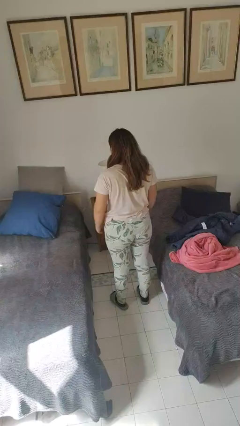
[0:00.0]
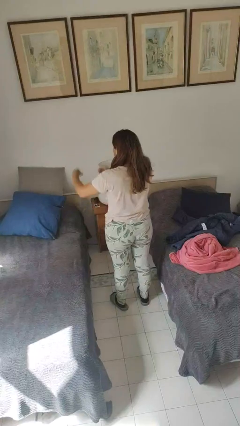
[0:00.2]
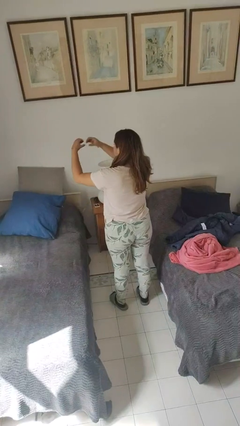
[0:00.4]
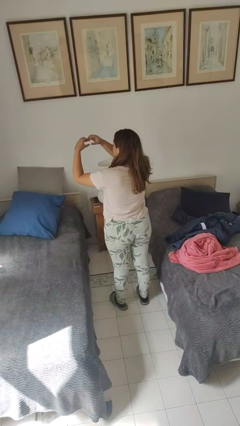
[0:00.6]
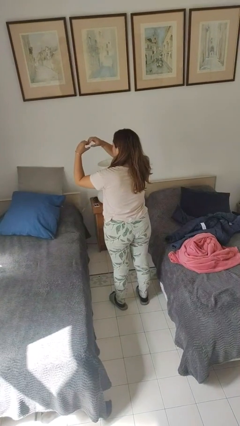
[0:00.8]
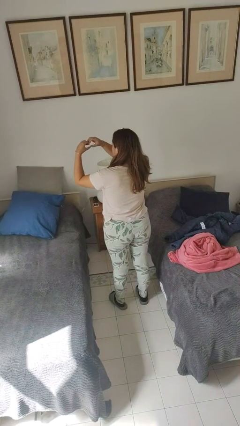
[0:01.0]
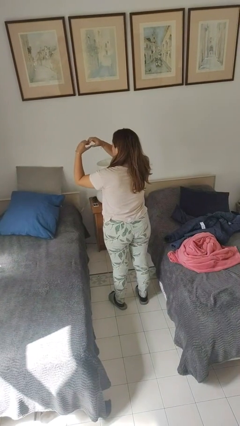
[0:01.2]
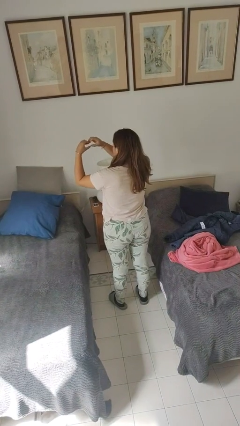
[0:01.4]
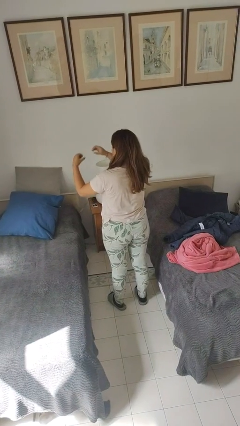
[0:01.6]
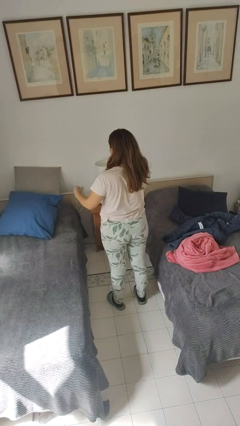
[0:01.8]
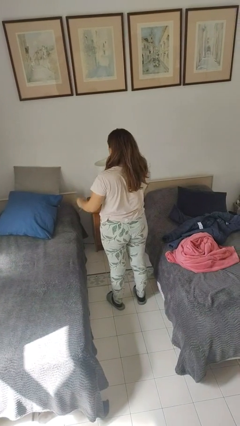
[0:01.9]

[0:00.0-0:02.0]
person gestures heart

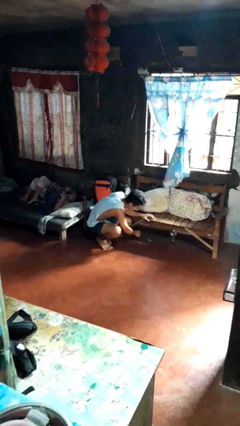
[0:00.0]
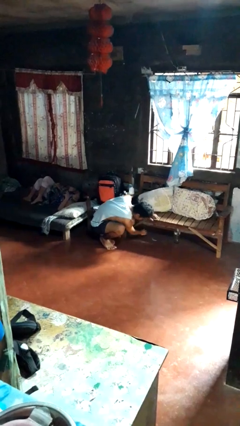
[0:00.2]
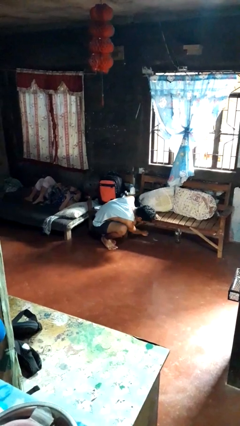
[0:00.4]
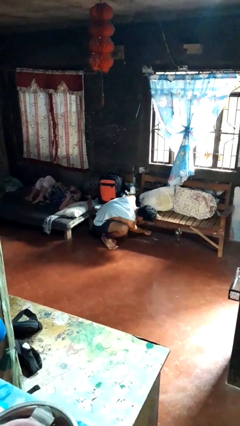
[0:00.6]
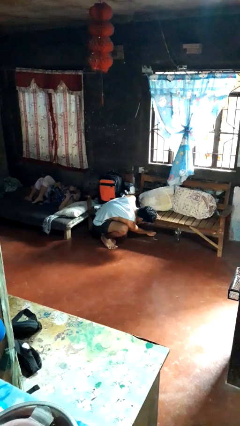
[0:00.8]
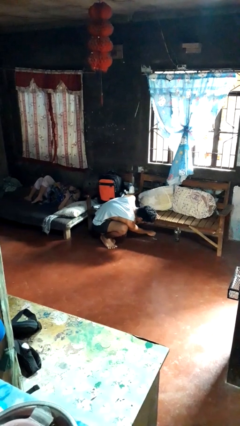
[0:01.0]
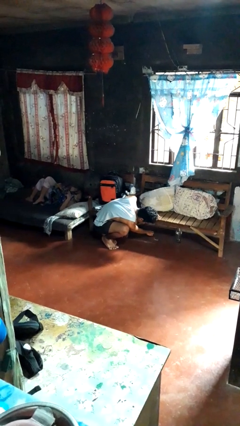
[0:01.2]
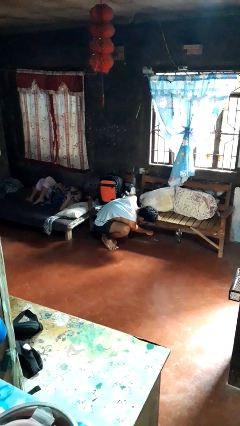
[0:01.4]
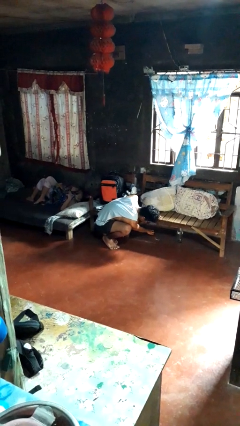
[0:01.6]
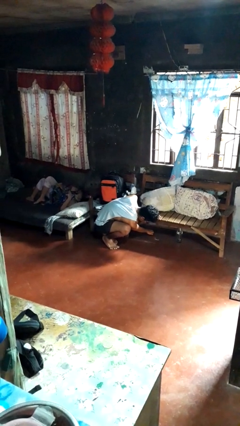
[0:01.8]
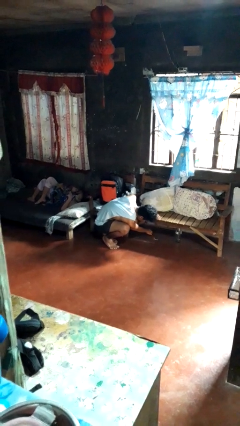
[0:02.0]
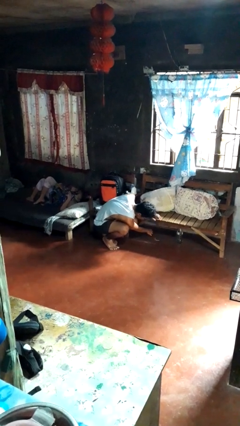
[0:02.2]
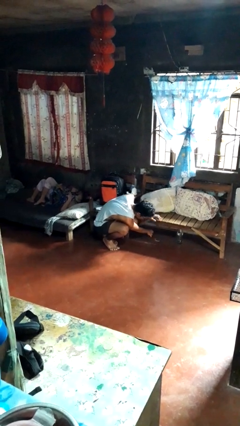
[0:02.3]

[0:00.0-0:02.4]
person searches under couch

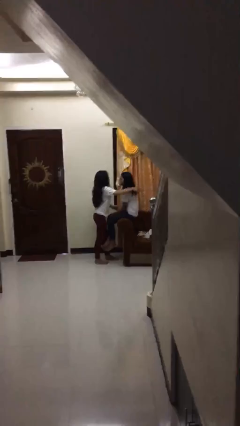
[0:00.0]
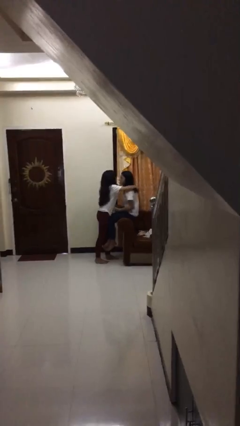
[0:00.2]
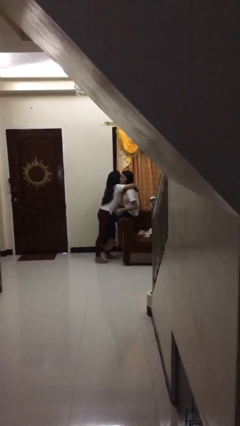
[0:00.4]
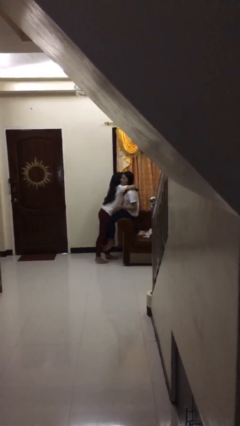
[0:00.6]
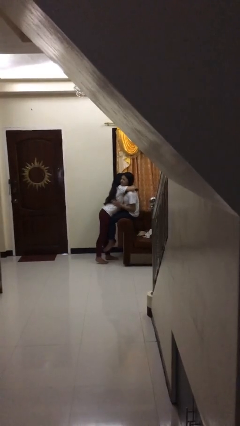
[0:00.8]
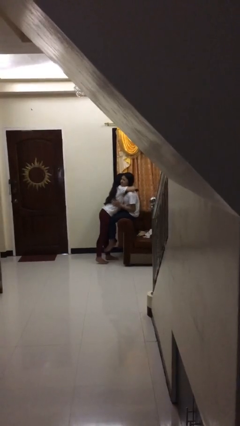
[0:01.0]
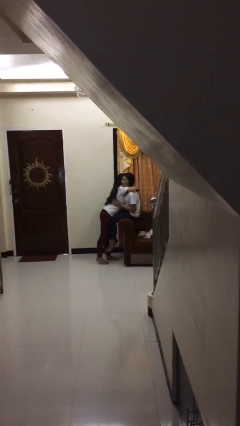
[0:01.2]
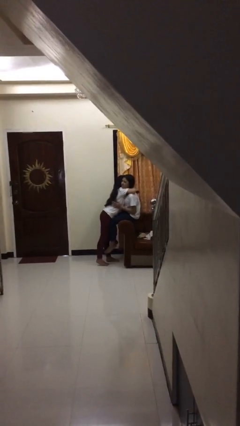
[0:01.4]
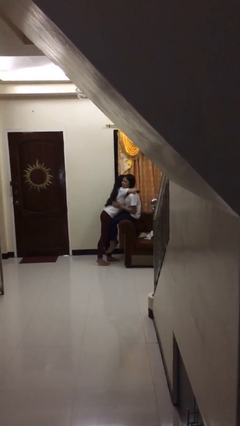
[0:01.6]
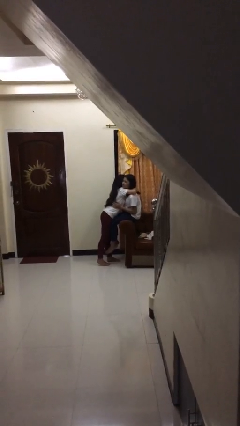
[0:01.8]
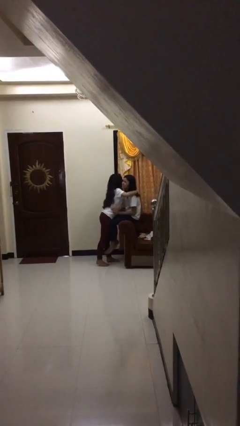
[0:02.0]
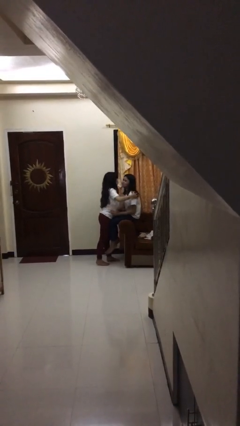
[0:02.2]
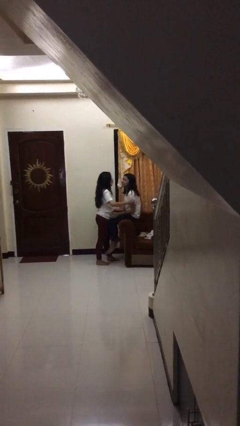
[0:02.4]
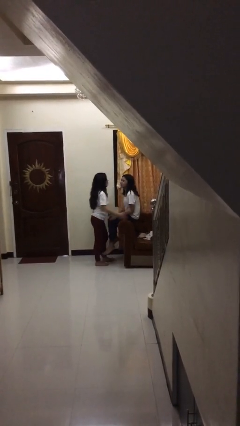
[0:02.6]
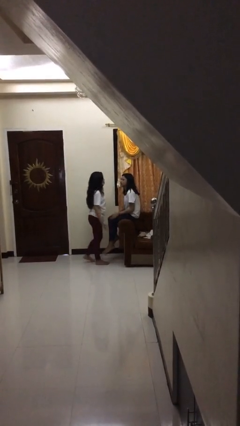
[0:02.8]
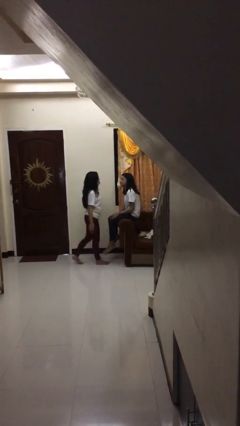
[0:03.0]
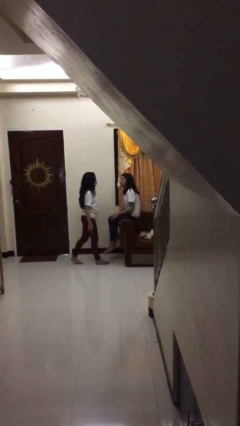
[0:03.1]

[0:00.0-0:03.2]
person embraces person

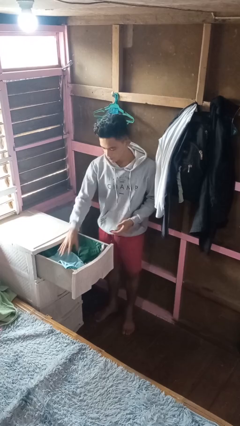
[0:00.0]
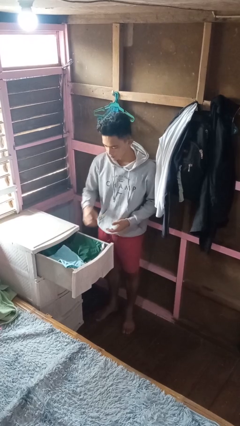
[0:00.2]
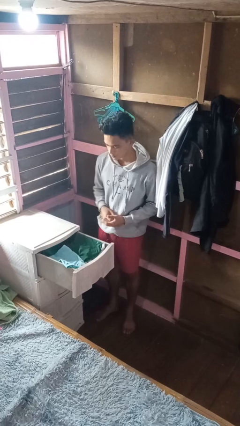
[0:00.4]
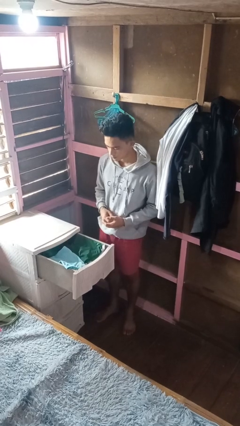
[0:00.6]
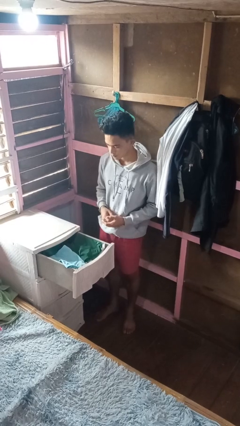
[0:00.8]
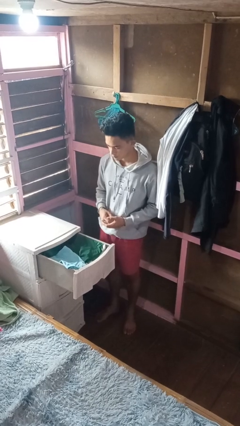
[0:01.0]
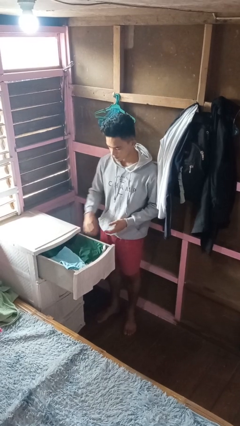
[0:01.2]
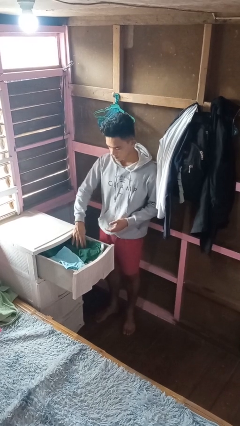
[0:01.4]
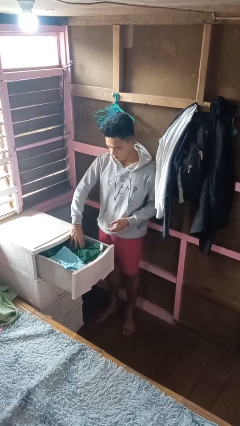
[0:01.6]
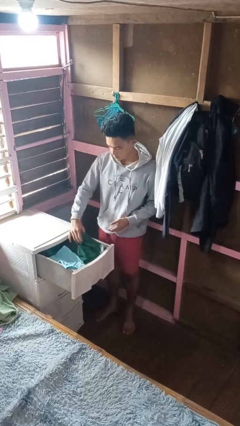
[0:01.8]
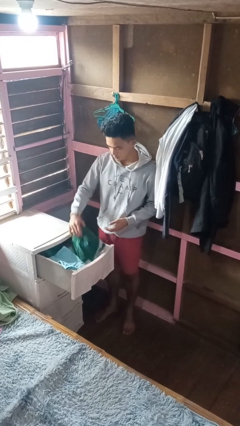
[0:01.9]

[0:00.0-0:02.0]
person puts clothes into dresser

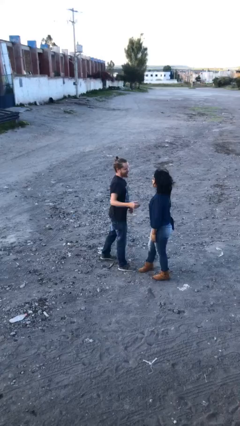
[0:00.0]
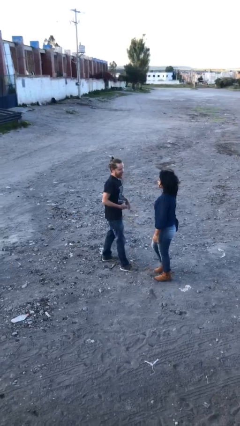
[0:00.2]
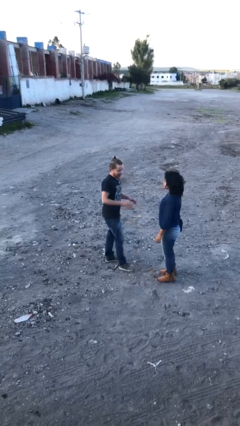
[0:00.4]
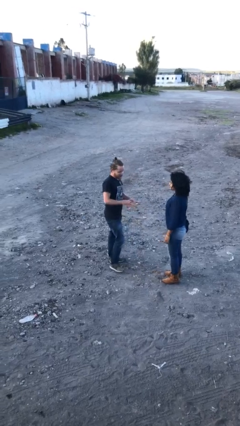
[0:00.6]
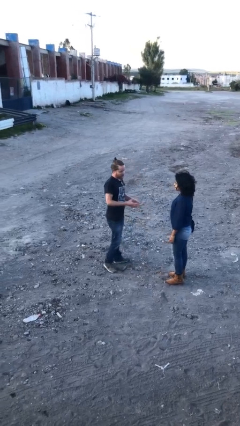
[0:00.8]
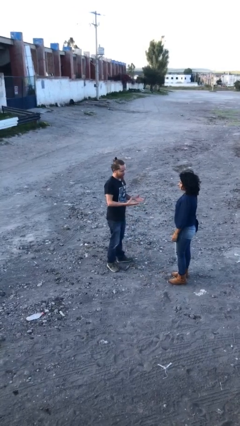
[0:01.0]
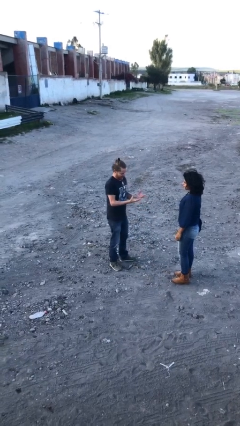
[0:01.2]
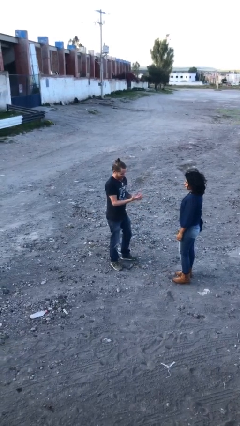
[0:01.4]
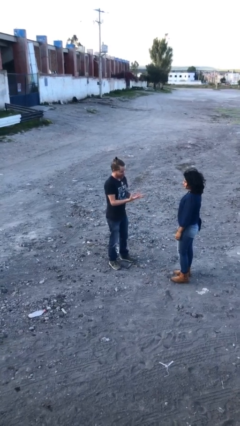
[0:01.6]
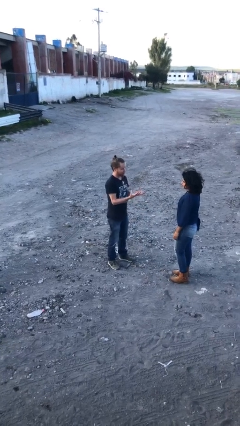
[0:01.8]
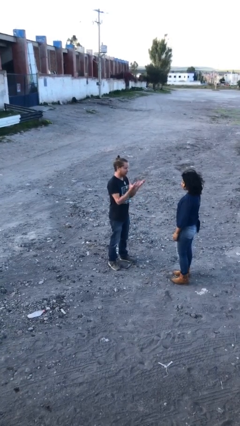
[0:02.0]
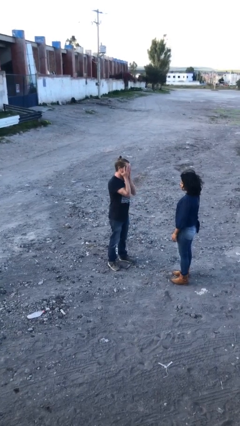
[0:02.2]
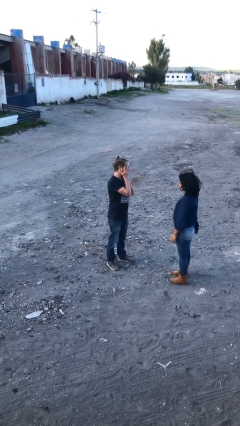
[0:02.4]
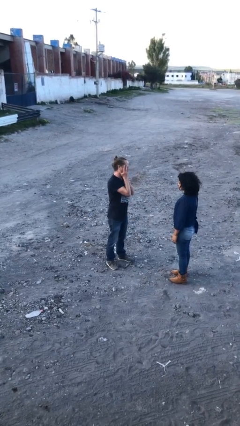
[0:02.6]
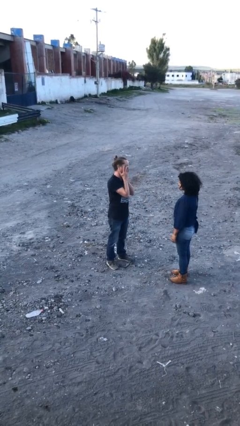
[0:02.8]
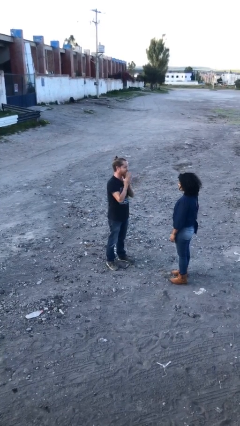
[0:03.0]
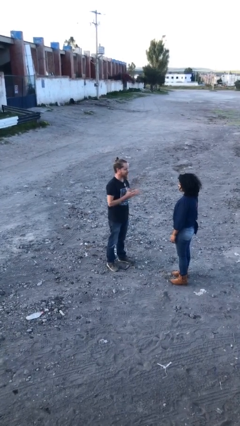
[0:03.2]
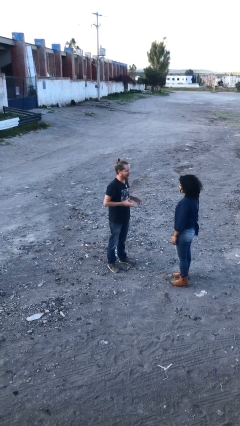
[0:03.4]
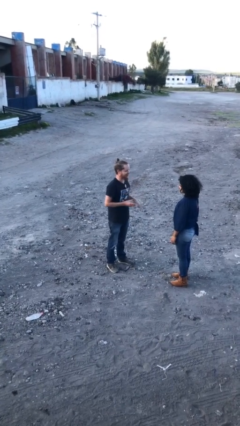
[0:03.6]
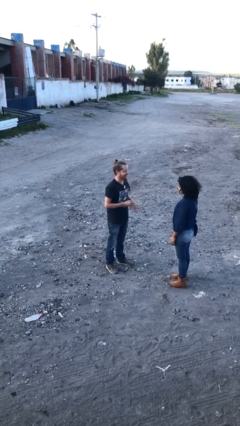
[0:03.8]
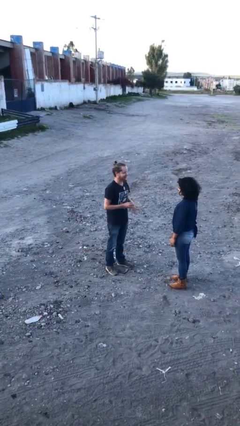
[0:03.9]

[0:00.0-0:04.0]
person talks to person

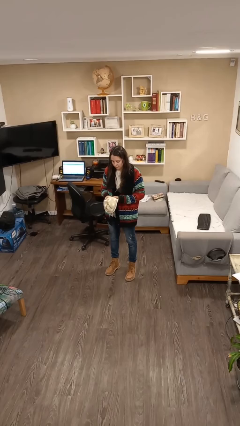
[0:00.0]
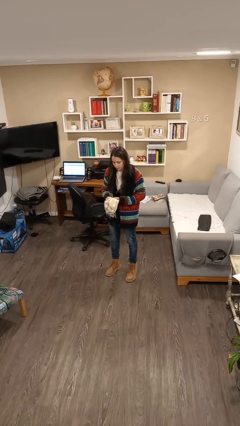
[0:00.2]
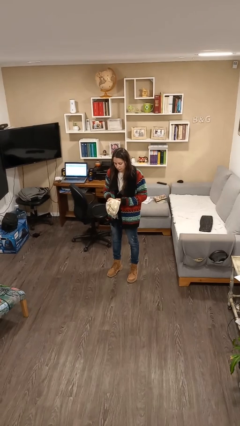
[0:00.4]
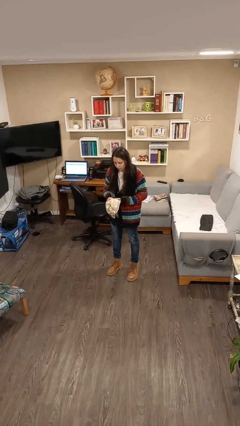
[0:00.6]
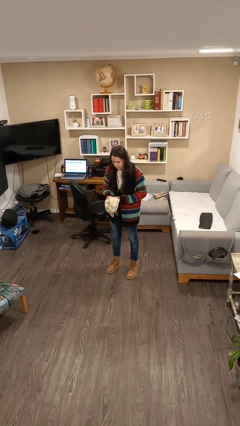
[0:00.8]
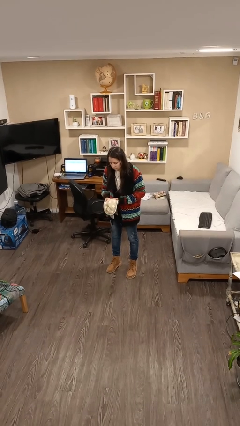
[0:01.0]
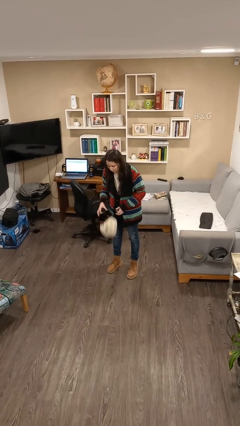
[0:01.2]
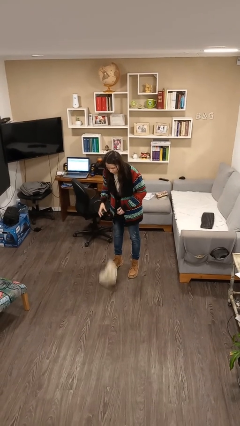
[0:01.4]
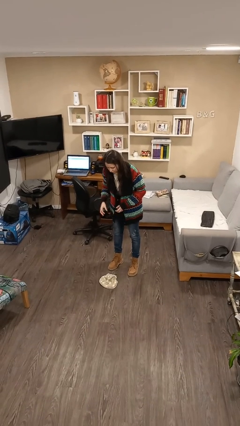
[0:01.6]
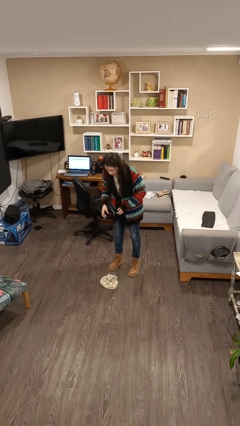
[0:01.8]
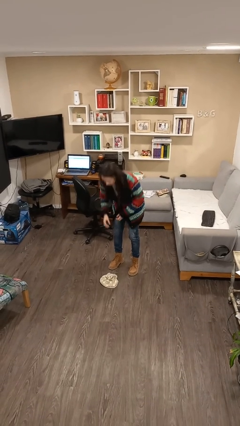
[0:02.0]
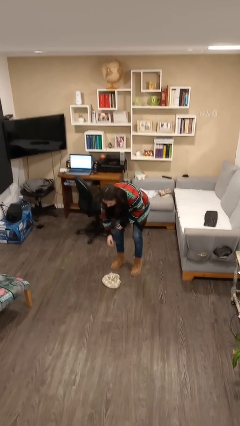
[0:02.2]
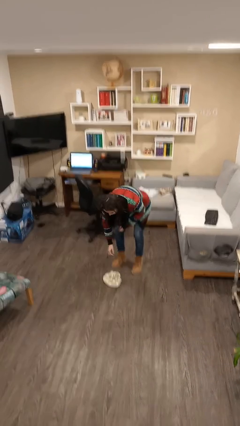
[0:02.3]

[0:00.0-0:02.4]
person drops object

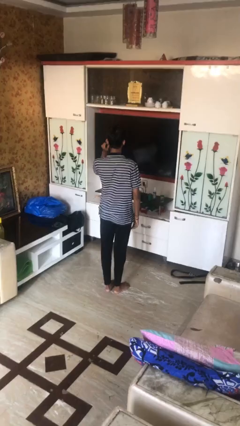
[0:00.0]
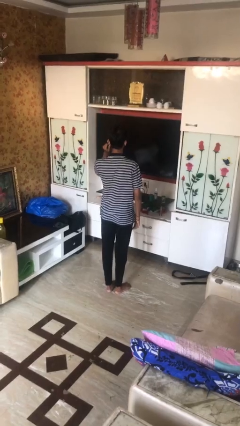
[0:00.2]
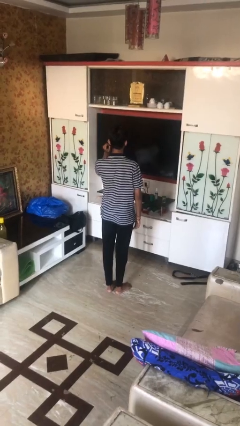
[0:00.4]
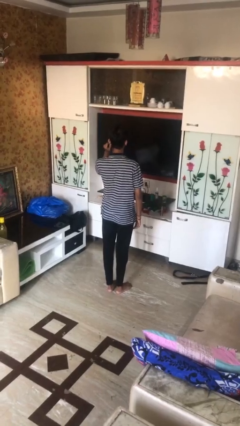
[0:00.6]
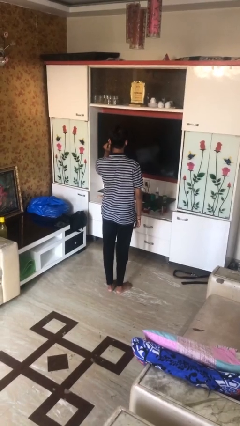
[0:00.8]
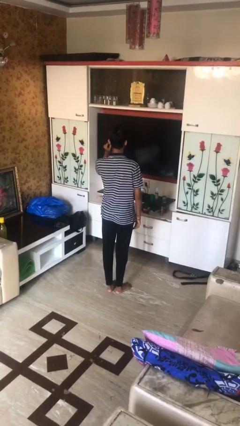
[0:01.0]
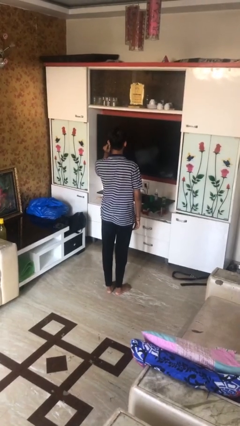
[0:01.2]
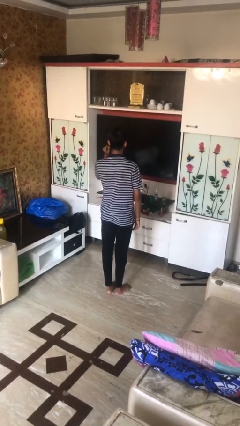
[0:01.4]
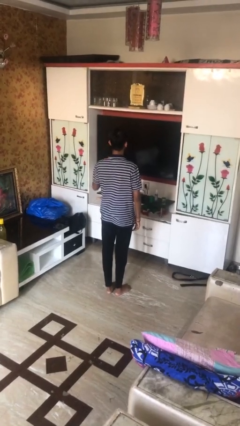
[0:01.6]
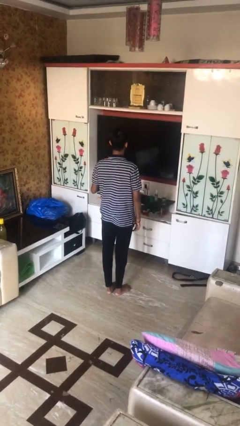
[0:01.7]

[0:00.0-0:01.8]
person touches earlobe
